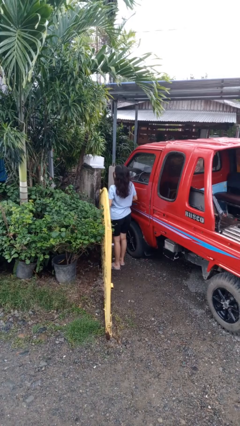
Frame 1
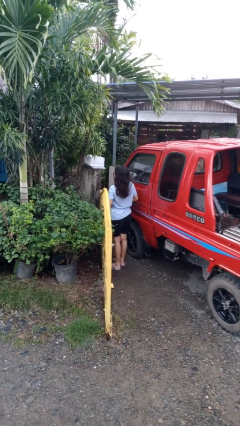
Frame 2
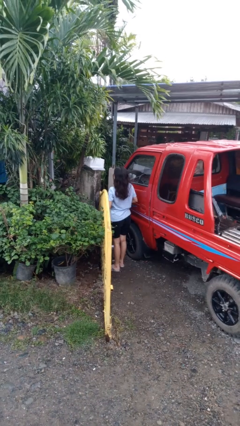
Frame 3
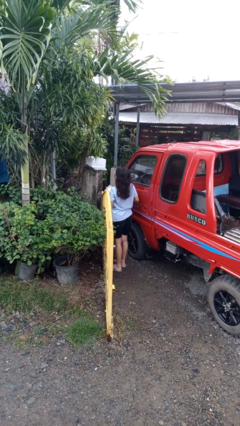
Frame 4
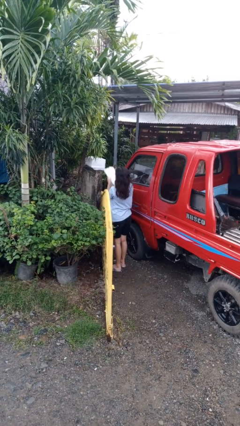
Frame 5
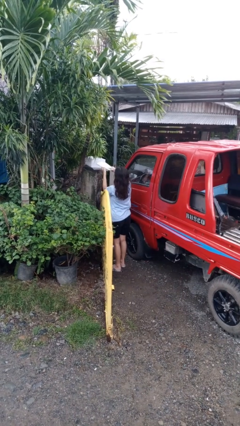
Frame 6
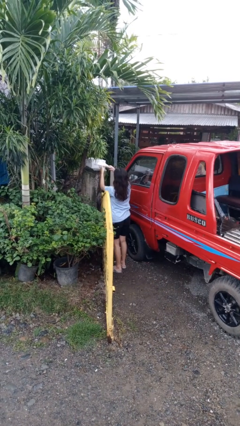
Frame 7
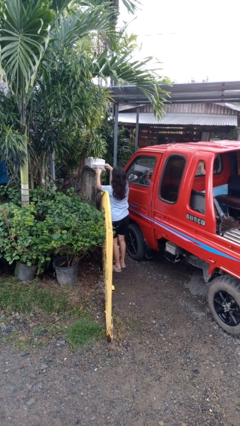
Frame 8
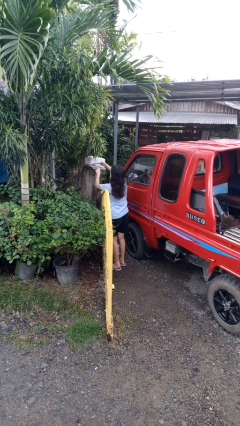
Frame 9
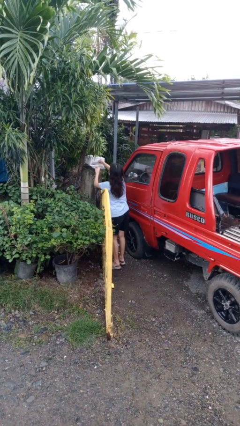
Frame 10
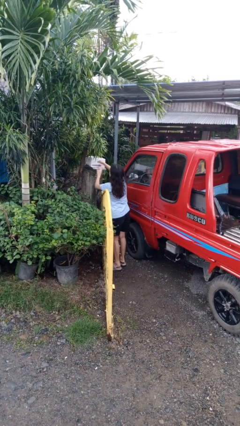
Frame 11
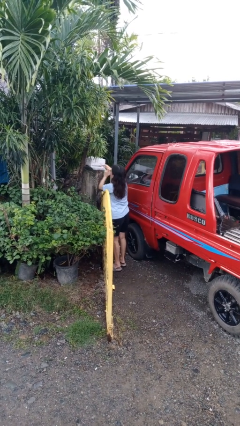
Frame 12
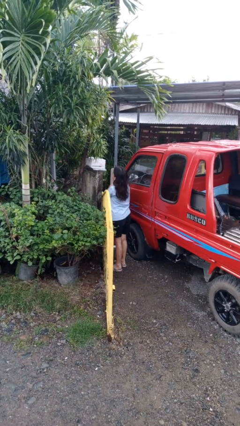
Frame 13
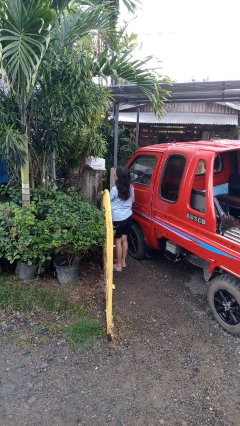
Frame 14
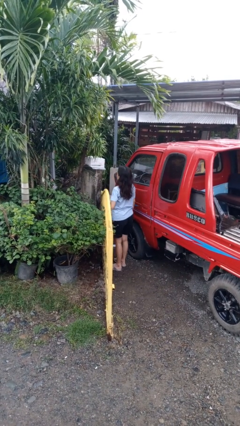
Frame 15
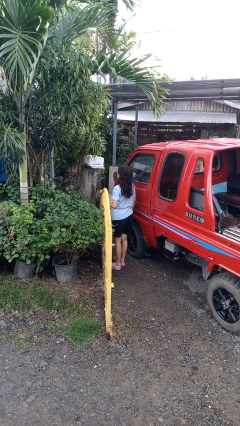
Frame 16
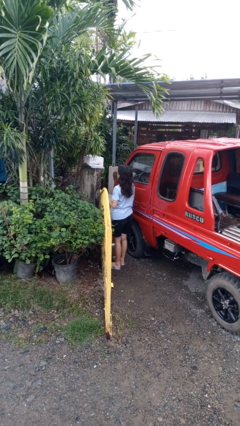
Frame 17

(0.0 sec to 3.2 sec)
person puts letters in mailbox

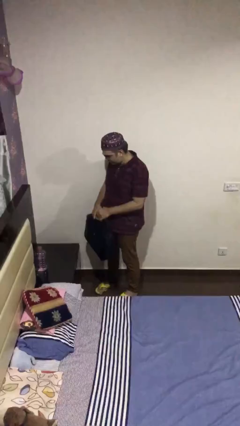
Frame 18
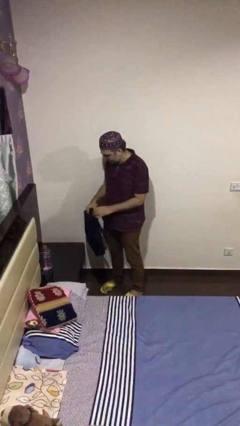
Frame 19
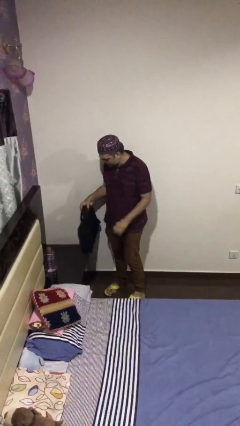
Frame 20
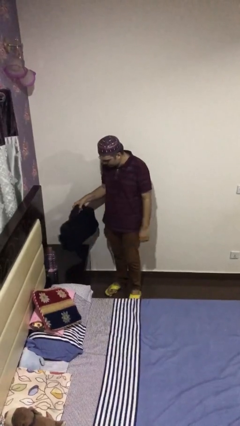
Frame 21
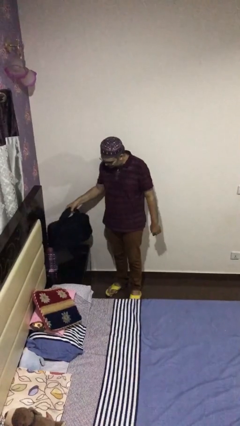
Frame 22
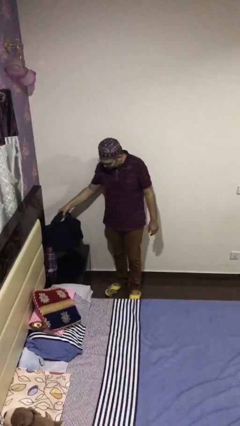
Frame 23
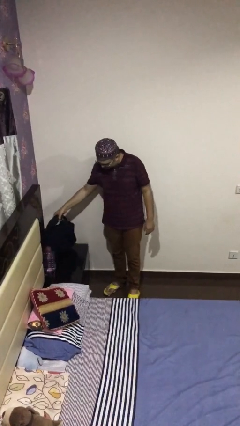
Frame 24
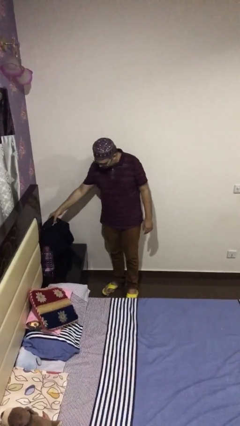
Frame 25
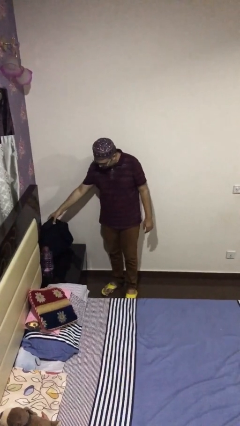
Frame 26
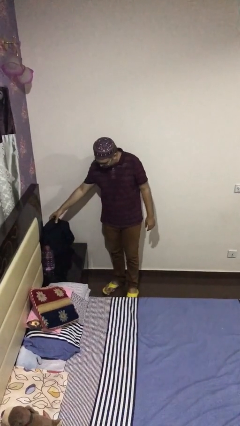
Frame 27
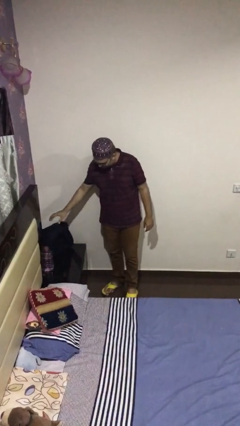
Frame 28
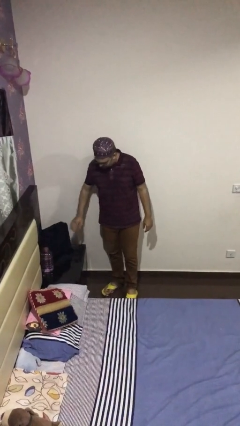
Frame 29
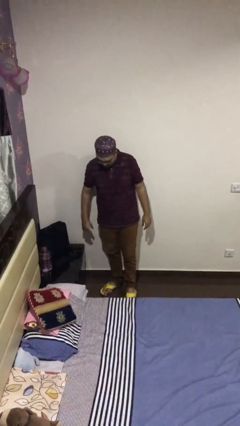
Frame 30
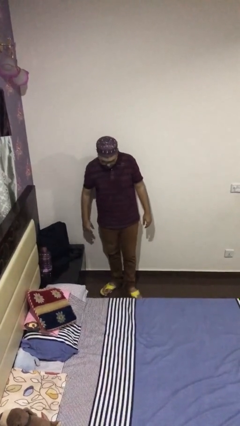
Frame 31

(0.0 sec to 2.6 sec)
person puts down object on table

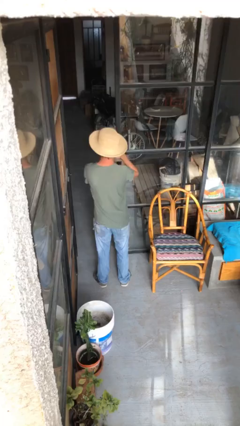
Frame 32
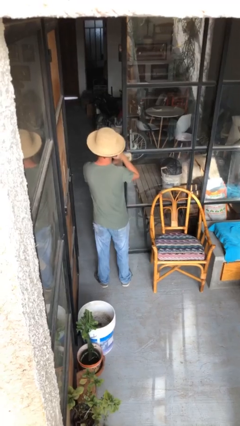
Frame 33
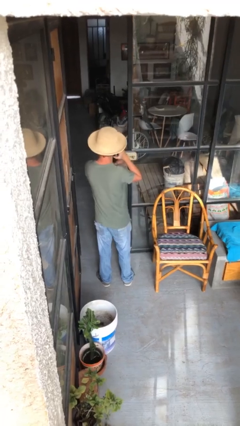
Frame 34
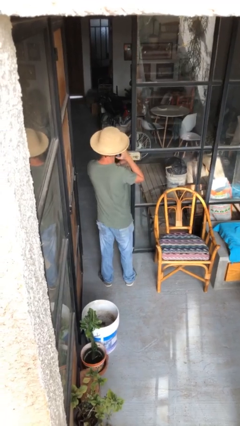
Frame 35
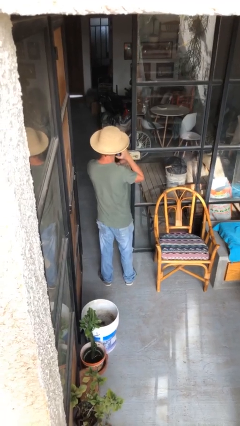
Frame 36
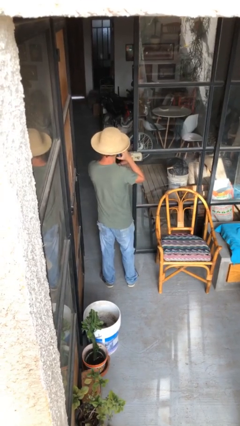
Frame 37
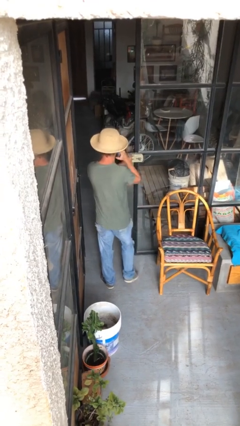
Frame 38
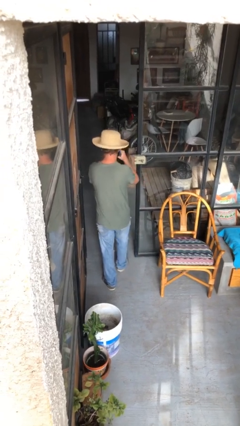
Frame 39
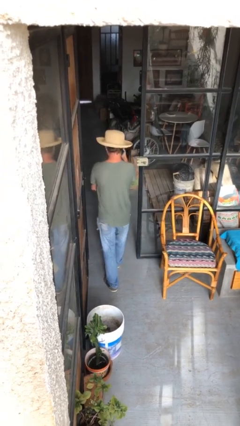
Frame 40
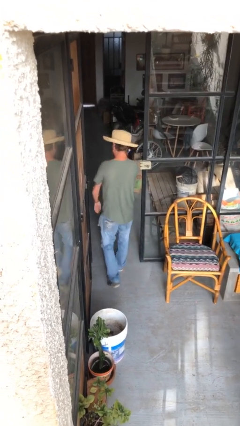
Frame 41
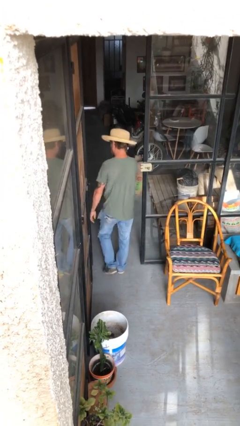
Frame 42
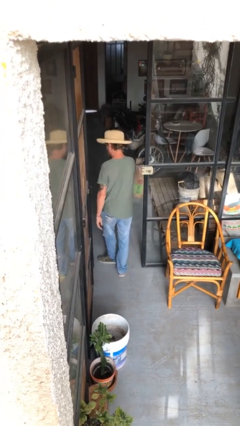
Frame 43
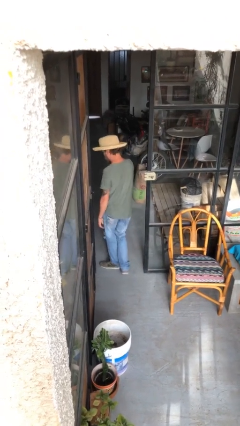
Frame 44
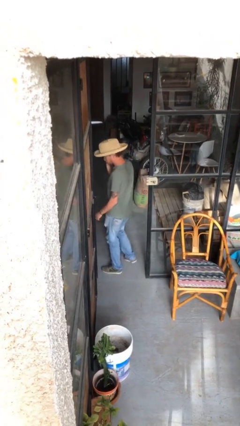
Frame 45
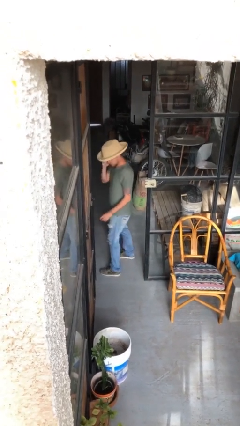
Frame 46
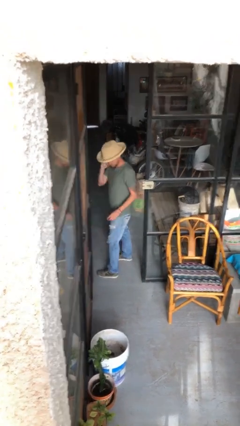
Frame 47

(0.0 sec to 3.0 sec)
person exits scene through structure

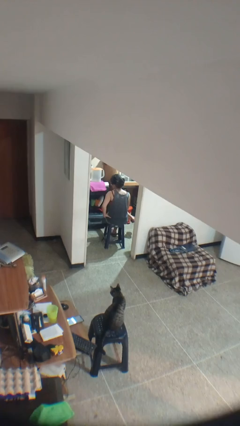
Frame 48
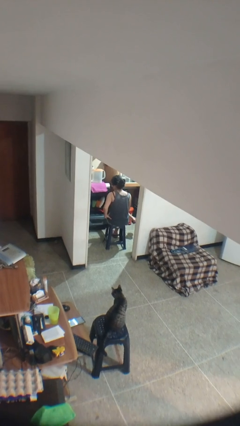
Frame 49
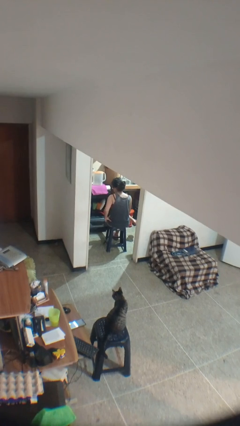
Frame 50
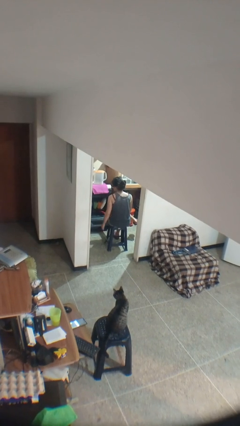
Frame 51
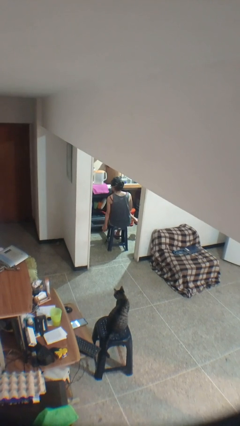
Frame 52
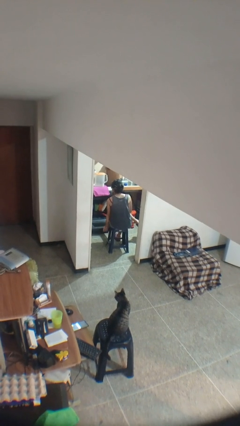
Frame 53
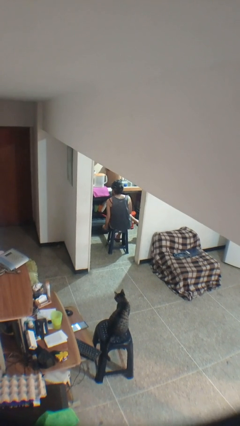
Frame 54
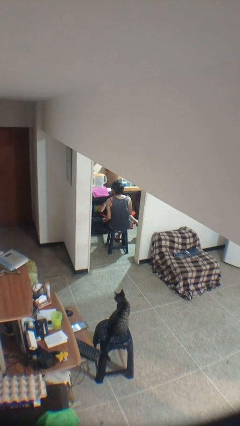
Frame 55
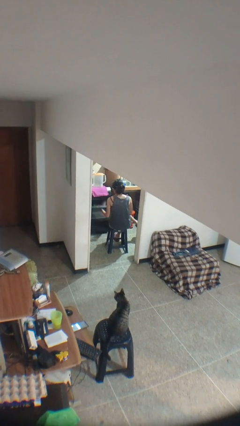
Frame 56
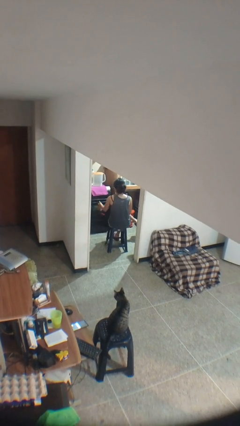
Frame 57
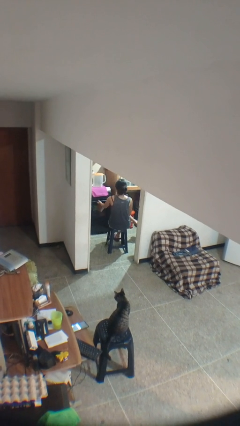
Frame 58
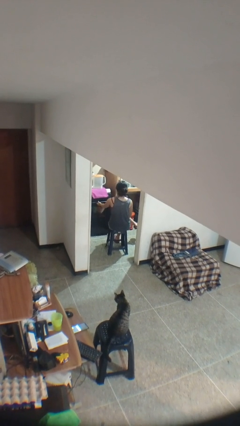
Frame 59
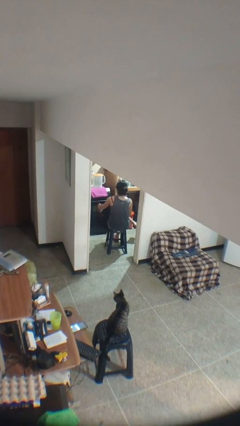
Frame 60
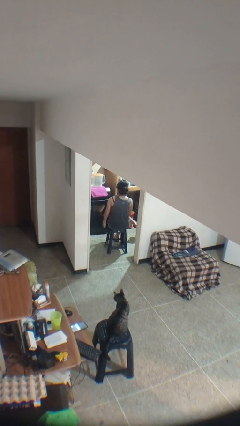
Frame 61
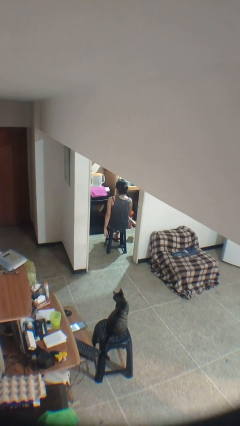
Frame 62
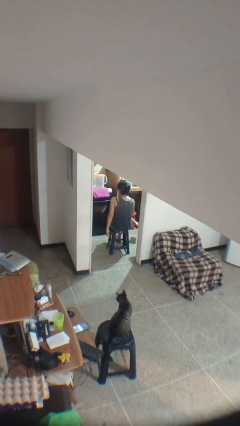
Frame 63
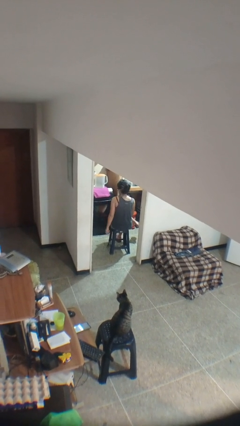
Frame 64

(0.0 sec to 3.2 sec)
person closes dishwasher

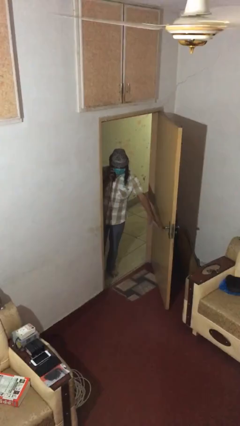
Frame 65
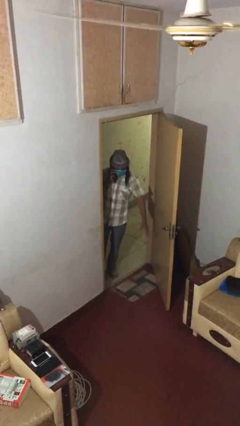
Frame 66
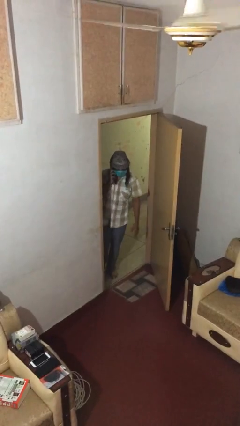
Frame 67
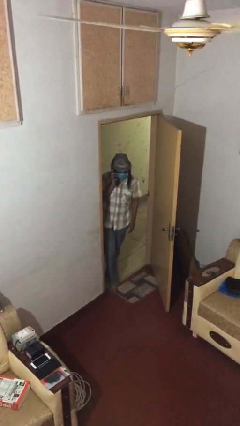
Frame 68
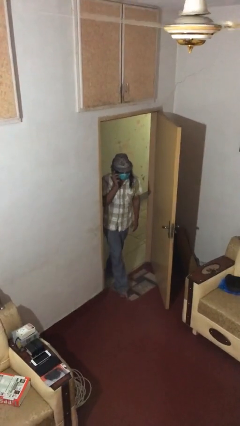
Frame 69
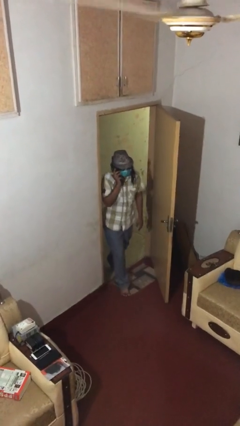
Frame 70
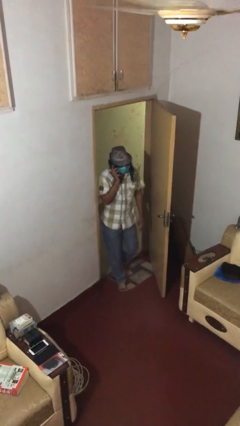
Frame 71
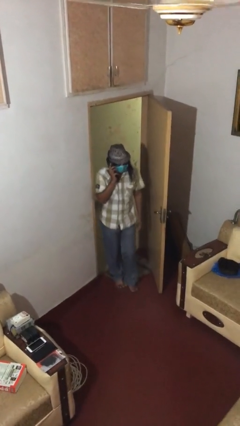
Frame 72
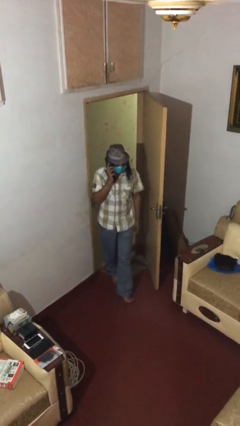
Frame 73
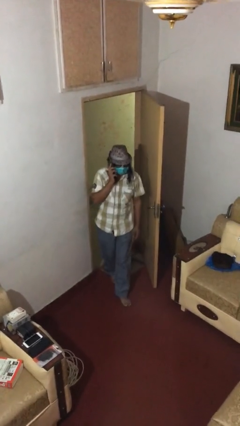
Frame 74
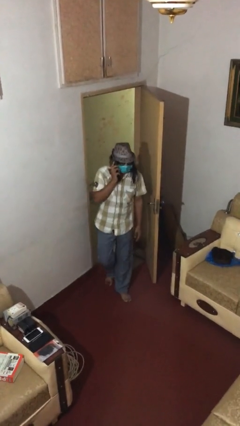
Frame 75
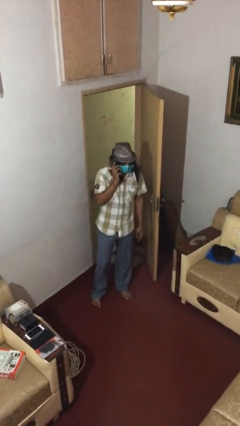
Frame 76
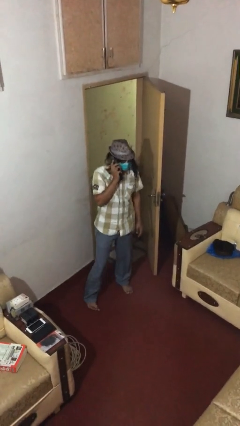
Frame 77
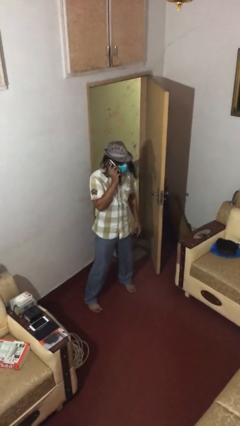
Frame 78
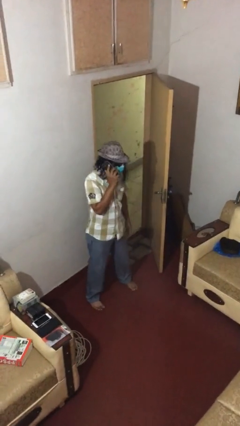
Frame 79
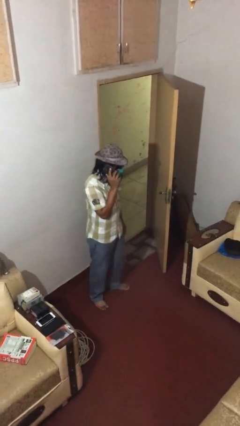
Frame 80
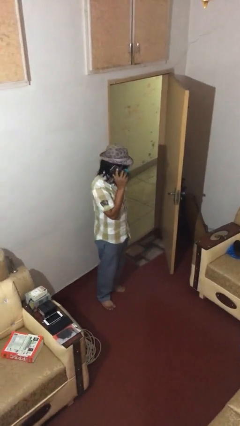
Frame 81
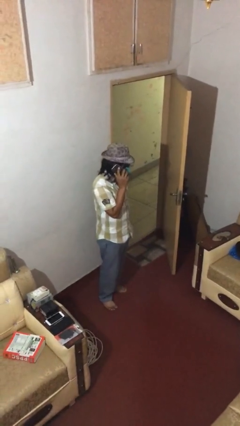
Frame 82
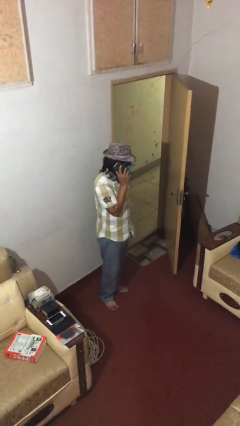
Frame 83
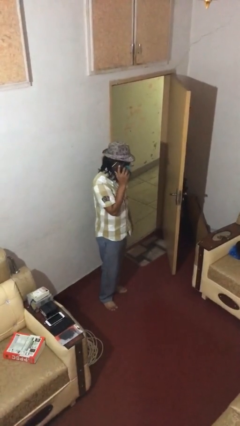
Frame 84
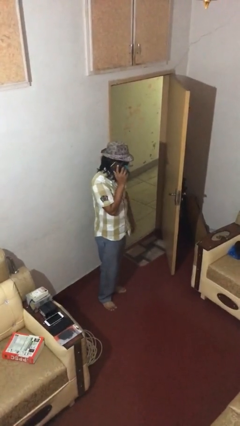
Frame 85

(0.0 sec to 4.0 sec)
person enters scene through structure

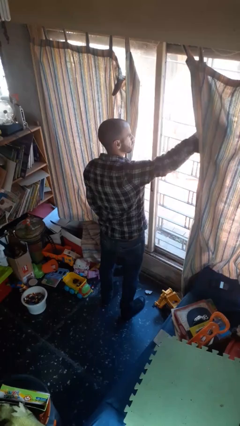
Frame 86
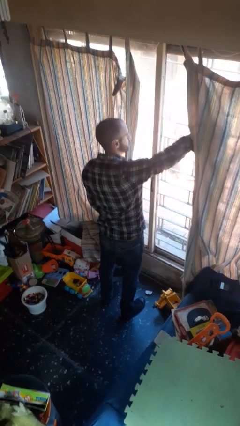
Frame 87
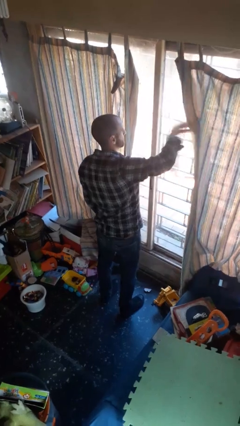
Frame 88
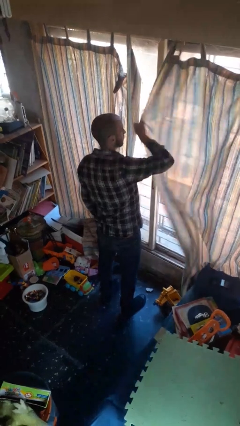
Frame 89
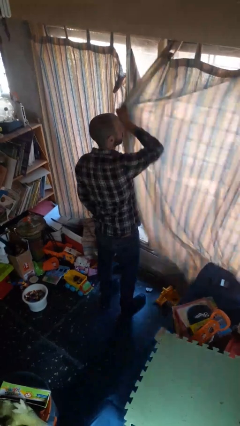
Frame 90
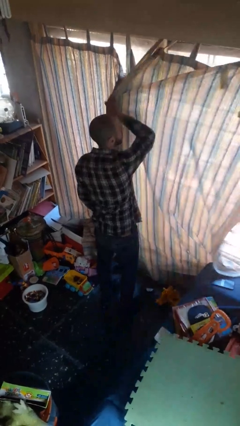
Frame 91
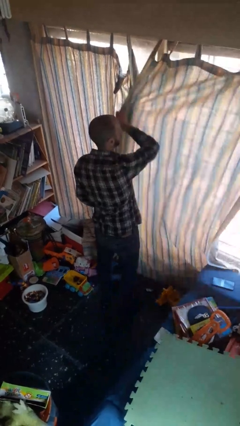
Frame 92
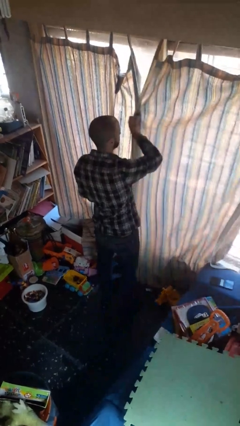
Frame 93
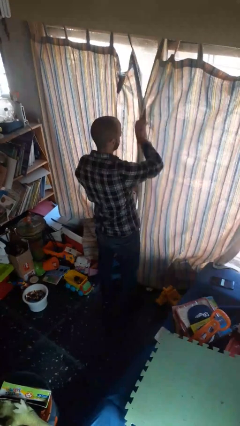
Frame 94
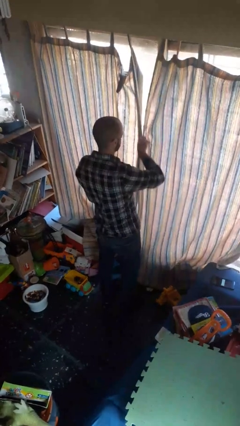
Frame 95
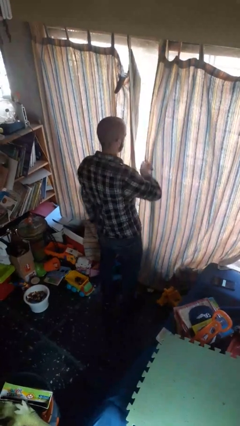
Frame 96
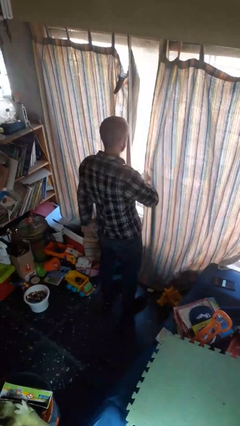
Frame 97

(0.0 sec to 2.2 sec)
person closes curtains
